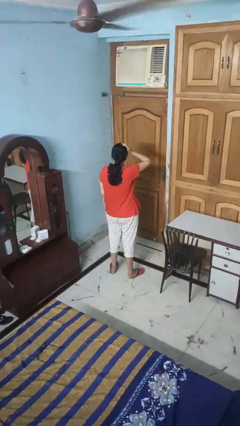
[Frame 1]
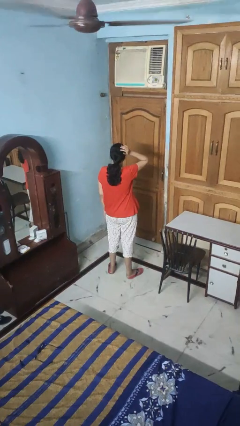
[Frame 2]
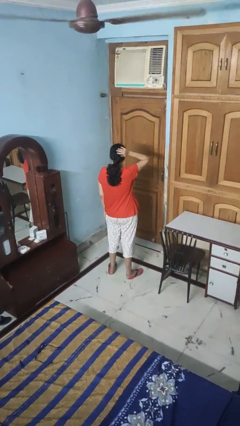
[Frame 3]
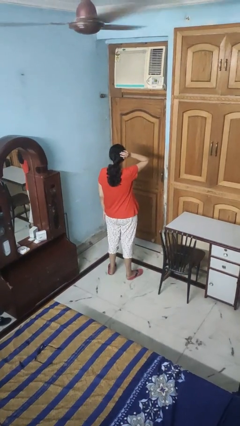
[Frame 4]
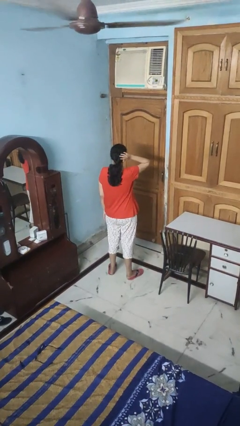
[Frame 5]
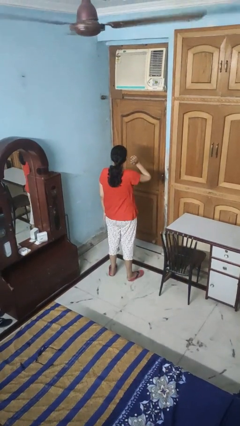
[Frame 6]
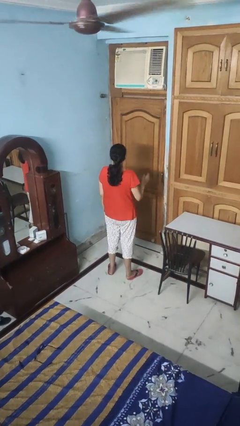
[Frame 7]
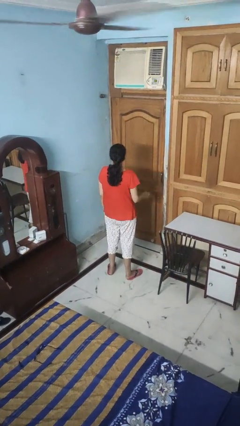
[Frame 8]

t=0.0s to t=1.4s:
person pats head

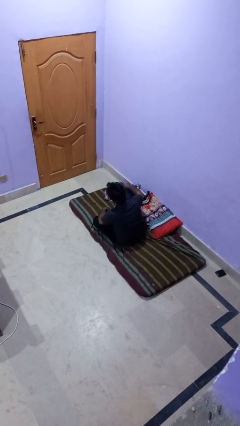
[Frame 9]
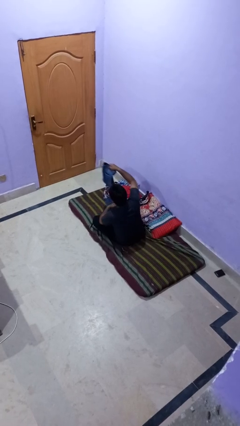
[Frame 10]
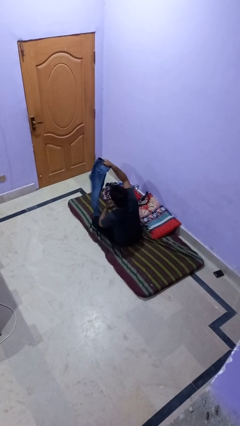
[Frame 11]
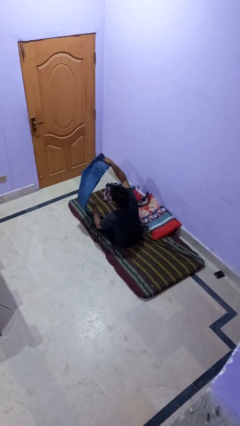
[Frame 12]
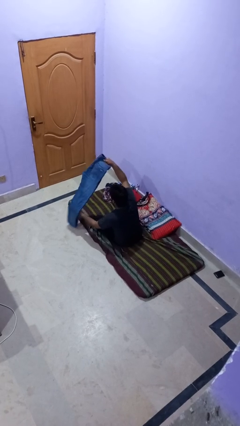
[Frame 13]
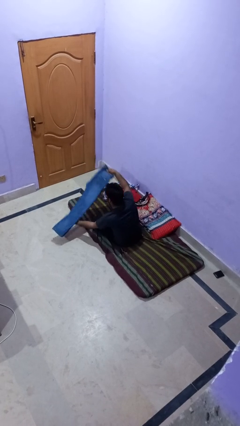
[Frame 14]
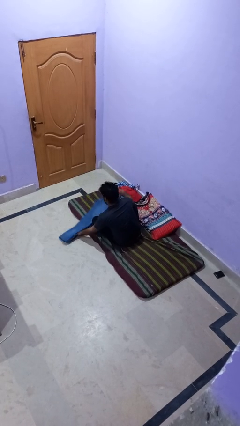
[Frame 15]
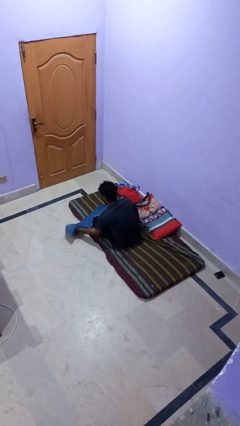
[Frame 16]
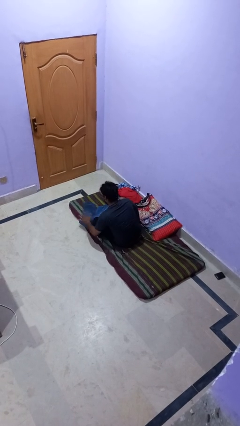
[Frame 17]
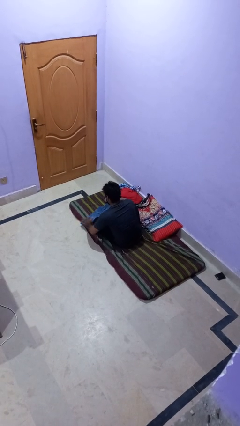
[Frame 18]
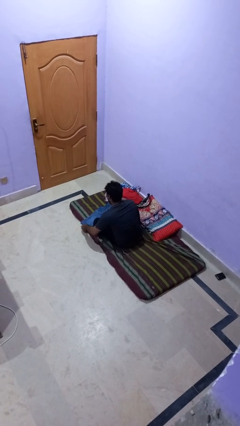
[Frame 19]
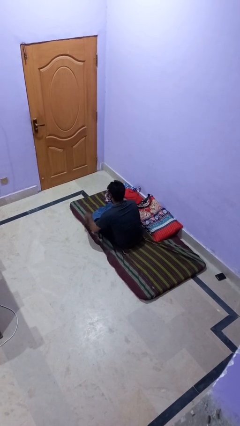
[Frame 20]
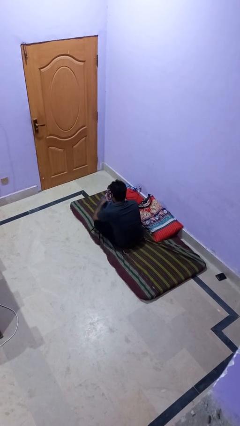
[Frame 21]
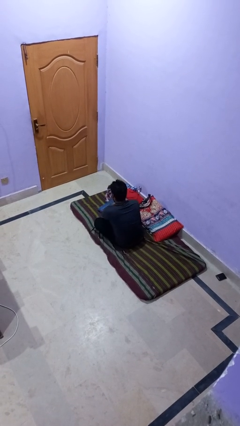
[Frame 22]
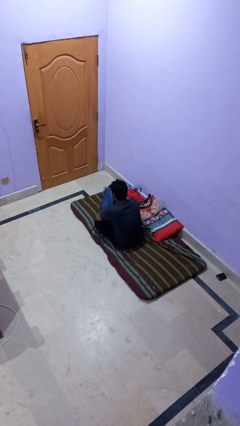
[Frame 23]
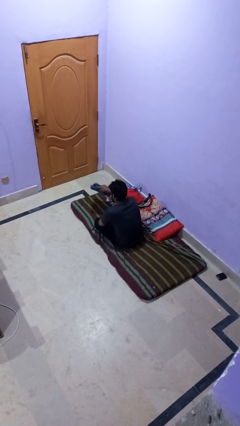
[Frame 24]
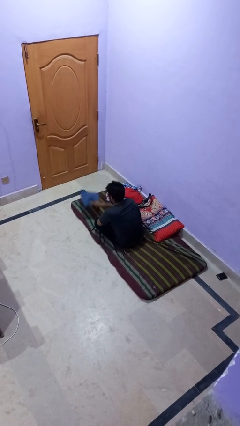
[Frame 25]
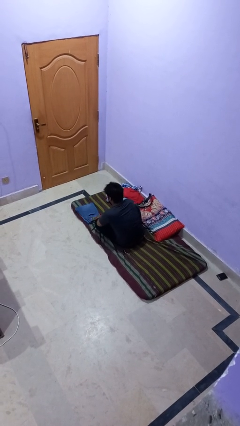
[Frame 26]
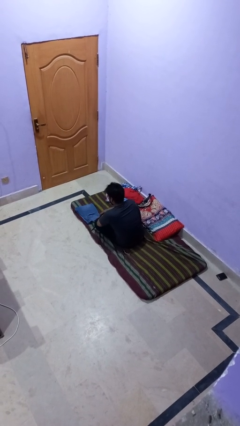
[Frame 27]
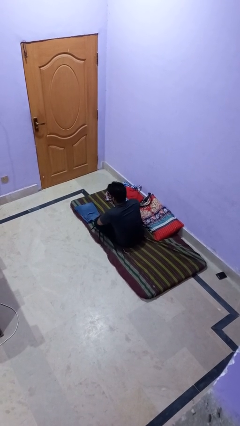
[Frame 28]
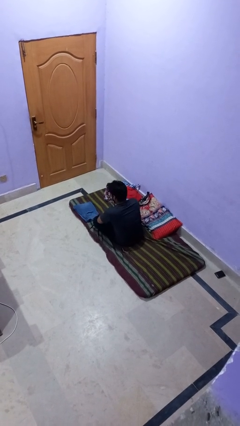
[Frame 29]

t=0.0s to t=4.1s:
person folds pants

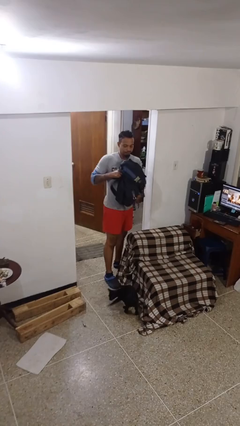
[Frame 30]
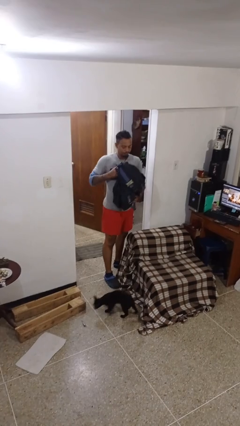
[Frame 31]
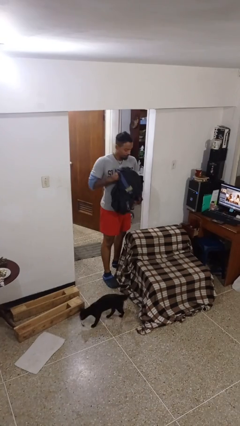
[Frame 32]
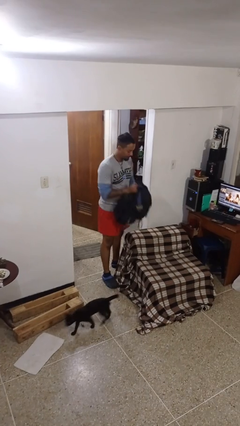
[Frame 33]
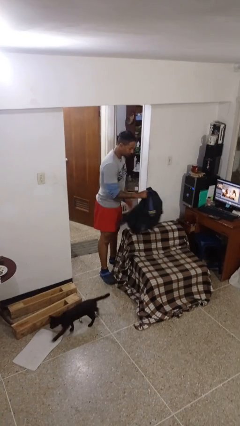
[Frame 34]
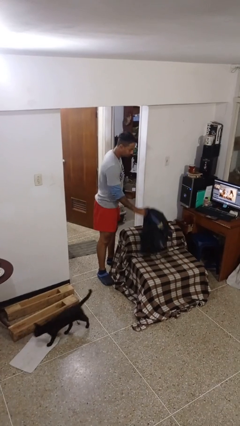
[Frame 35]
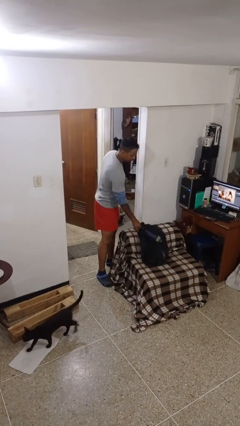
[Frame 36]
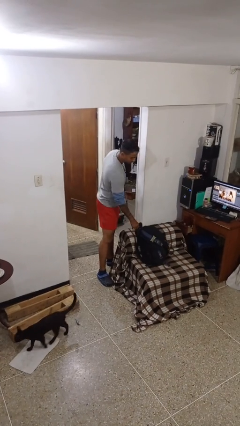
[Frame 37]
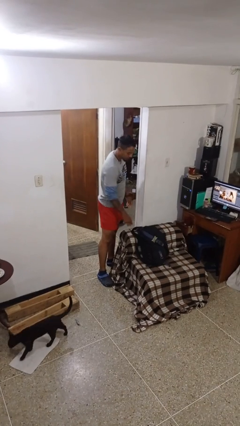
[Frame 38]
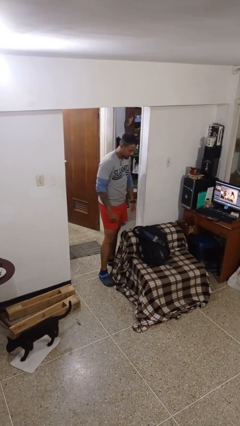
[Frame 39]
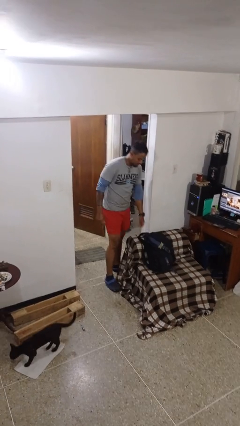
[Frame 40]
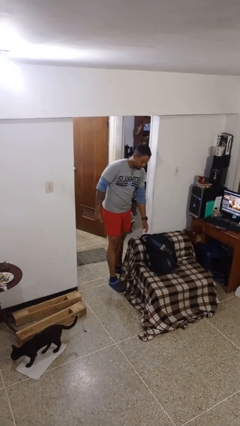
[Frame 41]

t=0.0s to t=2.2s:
person puts down object on couch

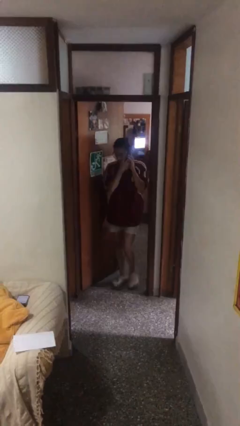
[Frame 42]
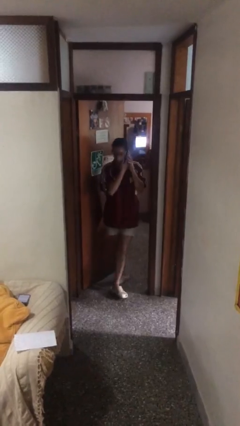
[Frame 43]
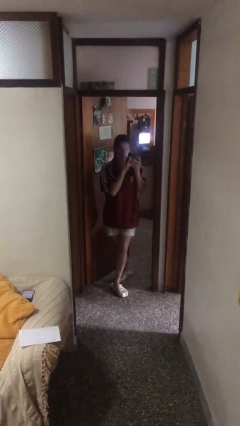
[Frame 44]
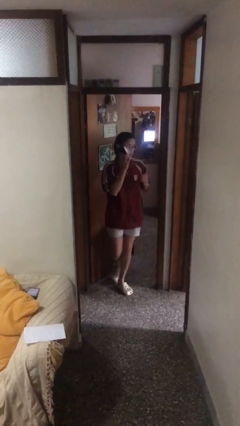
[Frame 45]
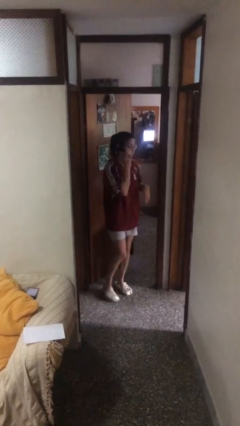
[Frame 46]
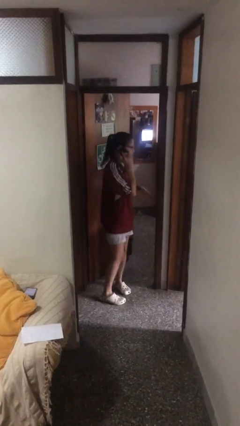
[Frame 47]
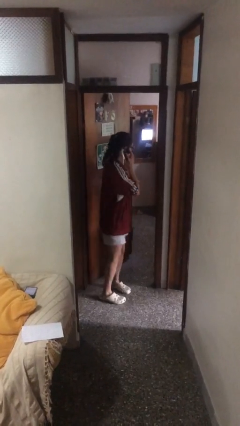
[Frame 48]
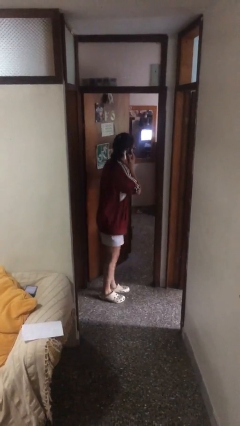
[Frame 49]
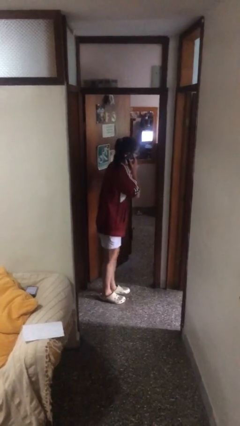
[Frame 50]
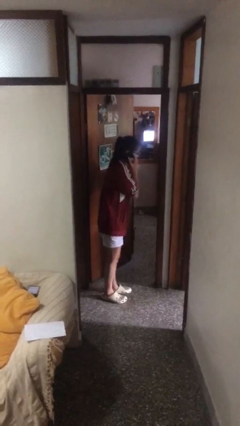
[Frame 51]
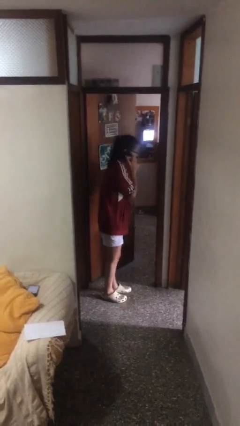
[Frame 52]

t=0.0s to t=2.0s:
person enters scene through structure

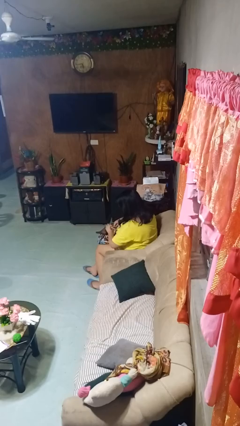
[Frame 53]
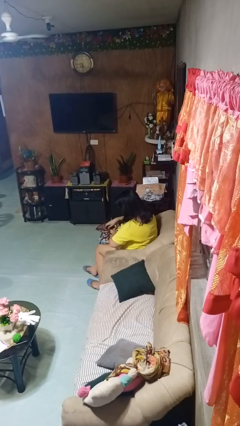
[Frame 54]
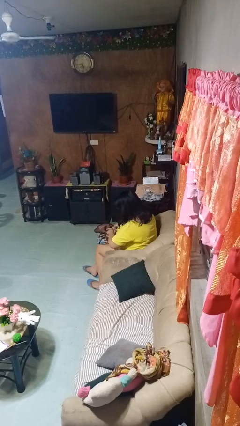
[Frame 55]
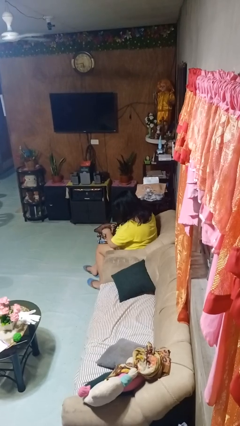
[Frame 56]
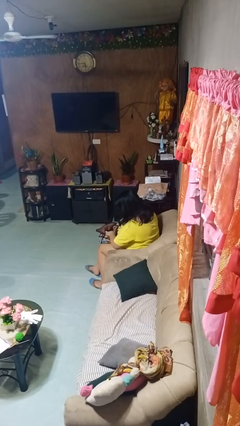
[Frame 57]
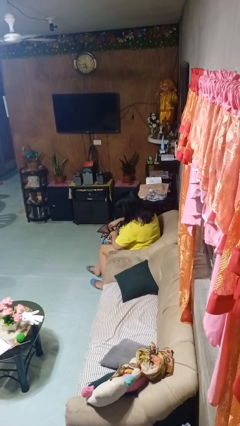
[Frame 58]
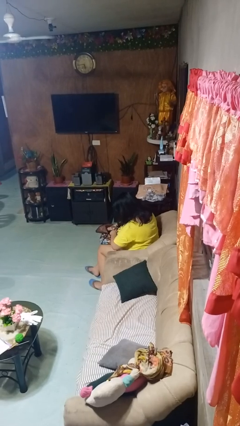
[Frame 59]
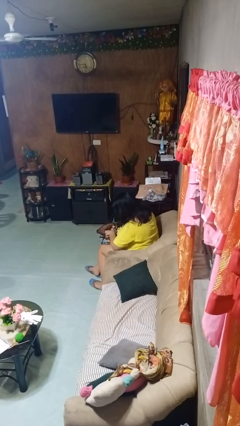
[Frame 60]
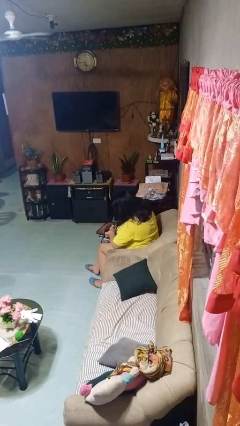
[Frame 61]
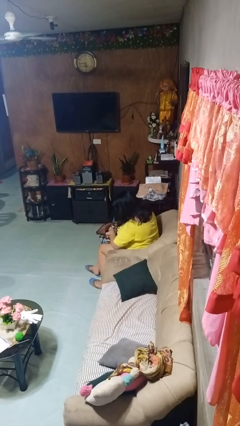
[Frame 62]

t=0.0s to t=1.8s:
person searches in backpack

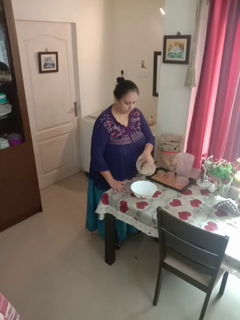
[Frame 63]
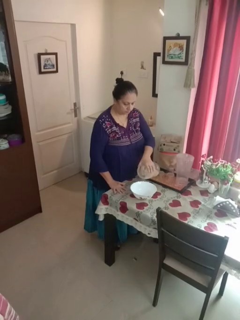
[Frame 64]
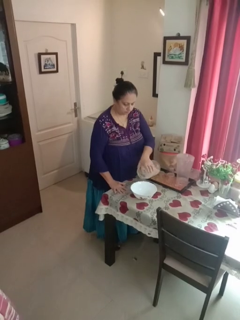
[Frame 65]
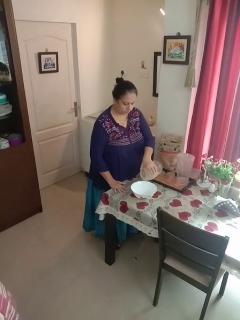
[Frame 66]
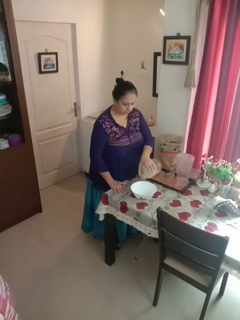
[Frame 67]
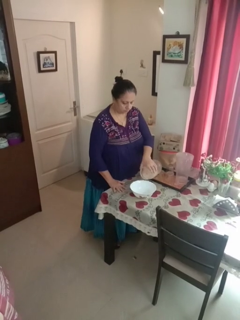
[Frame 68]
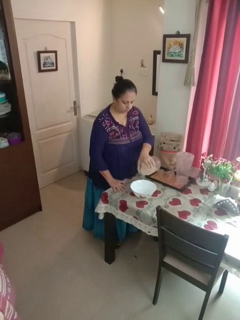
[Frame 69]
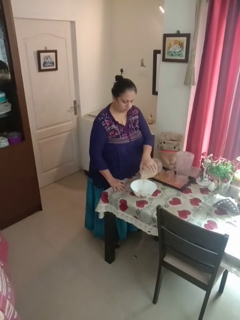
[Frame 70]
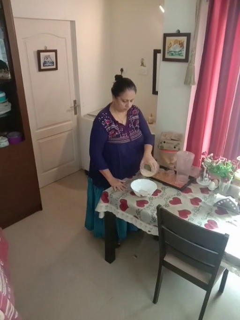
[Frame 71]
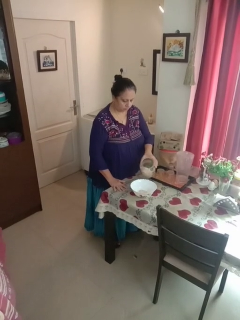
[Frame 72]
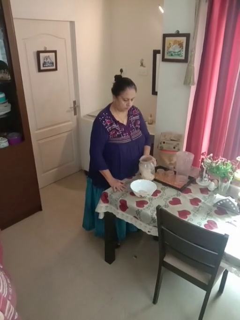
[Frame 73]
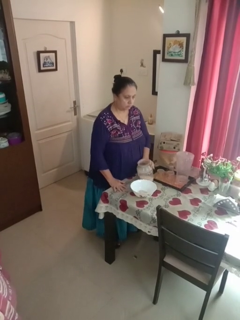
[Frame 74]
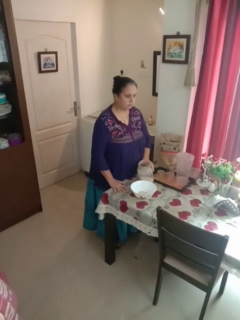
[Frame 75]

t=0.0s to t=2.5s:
person pours into bowl

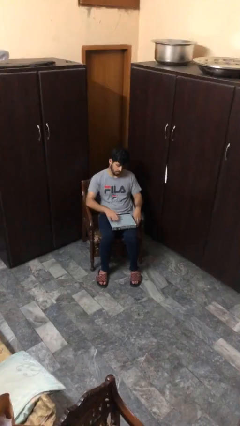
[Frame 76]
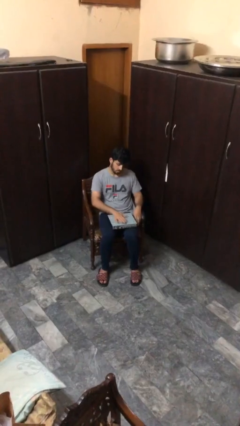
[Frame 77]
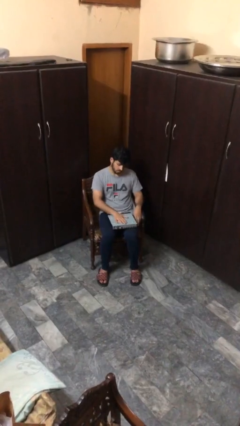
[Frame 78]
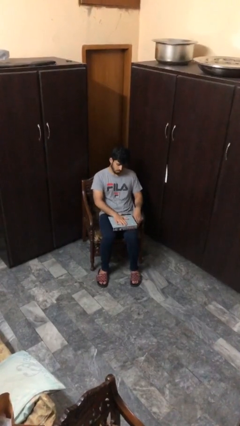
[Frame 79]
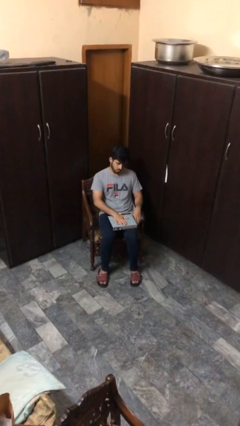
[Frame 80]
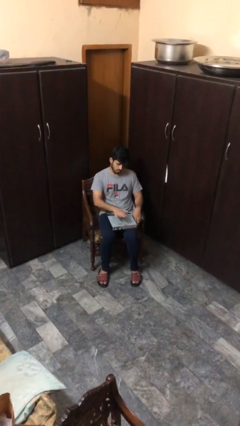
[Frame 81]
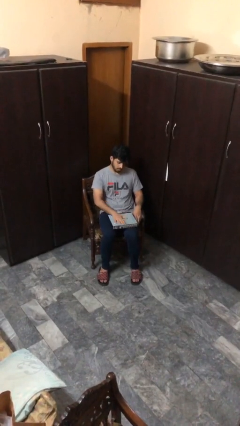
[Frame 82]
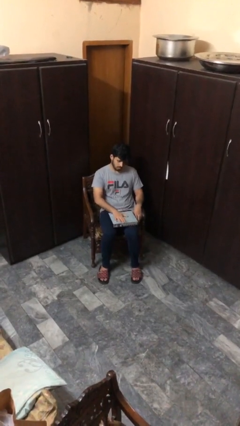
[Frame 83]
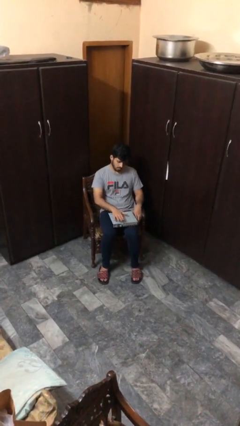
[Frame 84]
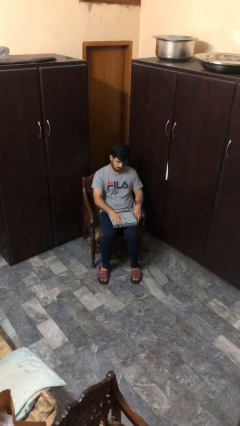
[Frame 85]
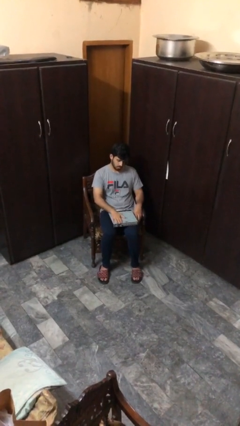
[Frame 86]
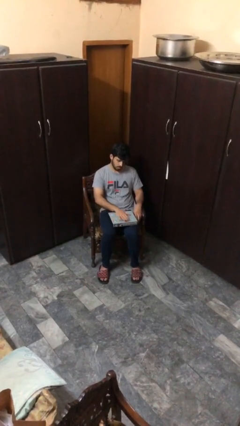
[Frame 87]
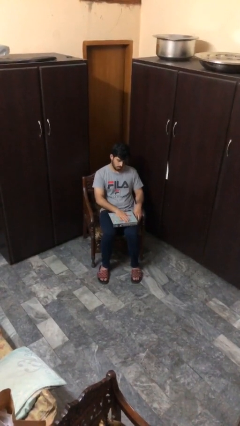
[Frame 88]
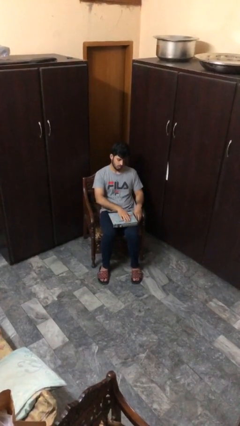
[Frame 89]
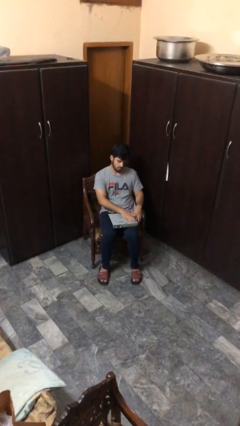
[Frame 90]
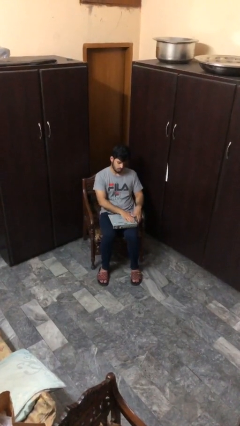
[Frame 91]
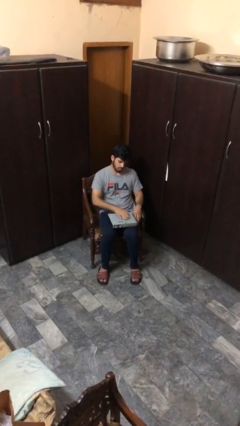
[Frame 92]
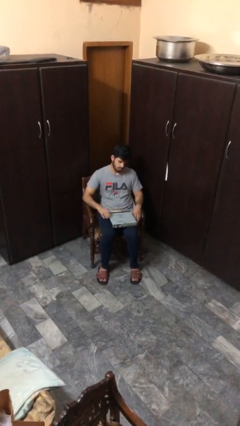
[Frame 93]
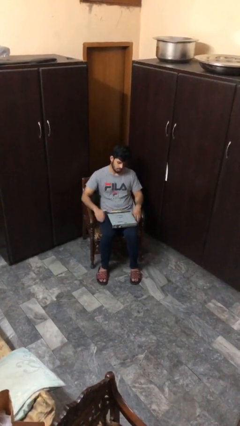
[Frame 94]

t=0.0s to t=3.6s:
person taps object with finger
